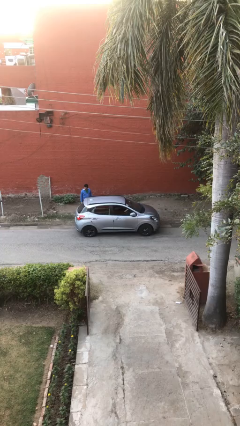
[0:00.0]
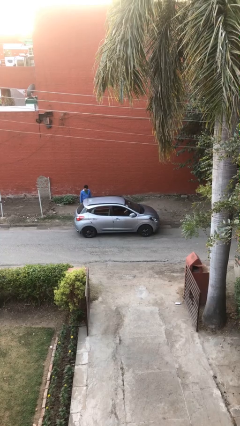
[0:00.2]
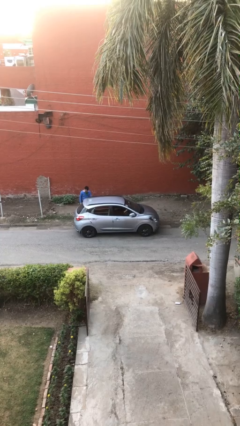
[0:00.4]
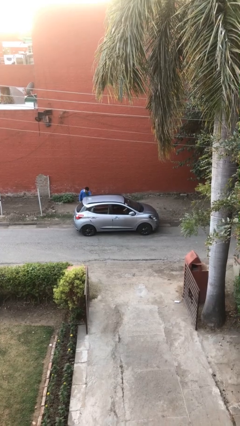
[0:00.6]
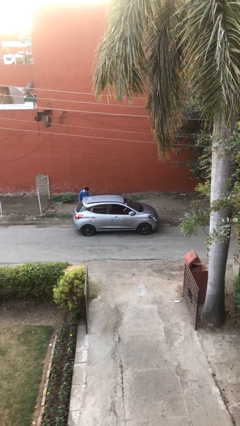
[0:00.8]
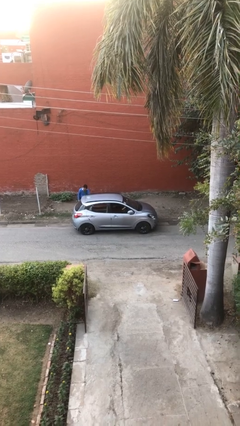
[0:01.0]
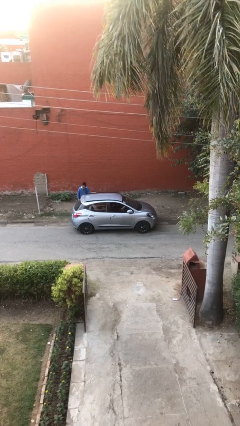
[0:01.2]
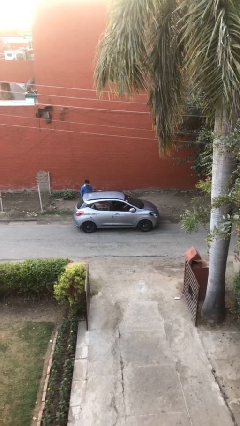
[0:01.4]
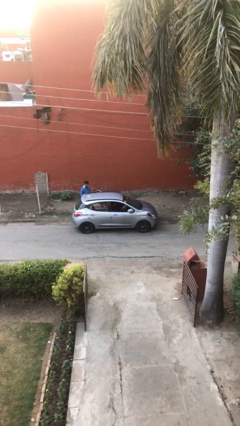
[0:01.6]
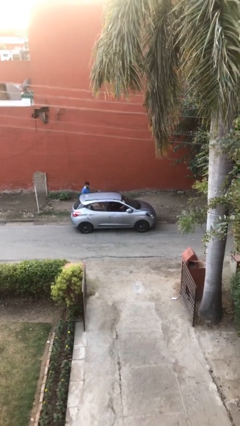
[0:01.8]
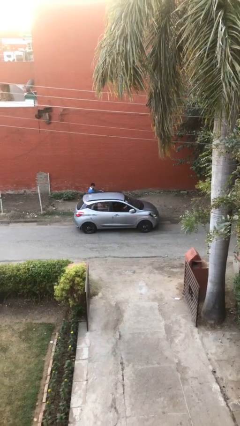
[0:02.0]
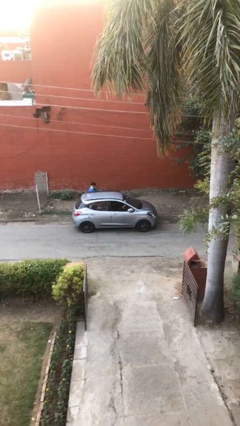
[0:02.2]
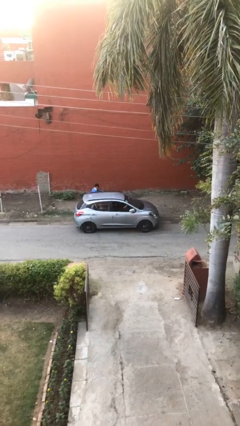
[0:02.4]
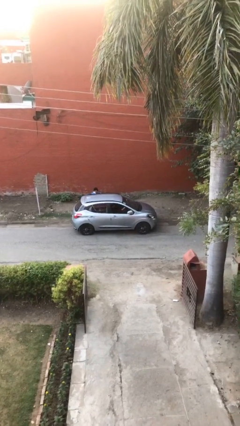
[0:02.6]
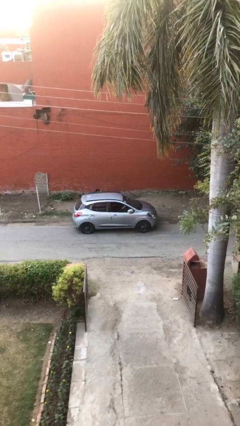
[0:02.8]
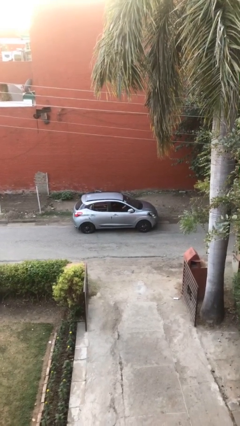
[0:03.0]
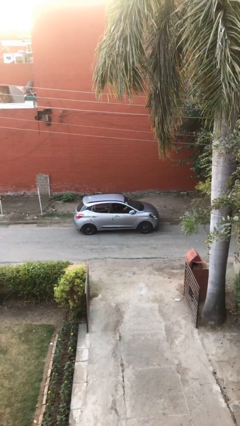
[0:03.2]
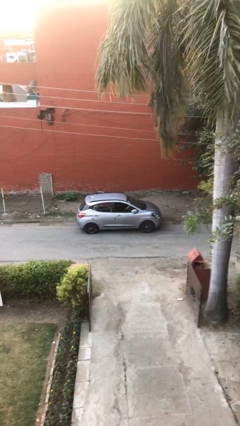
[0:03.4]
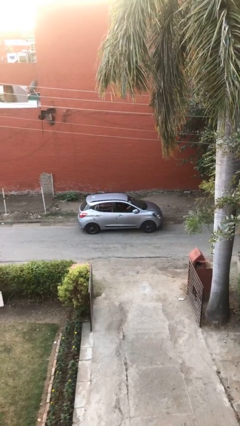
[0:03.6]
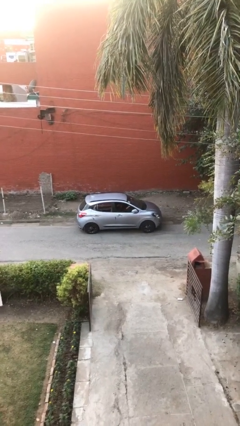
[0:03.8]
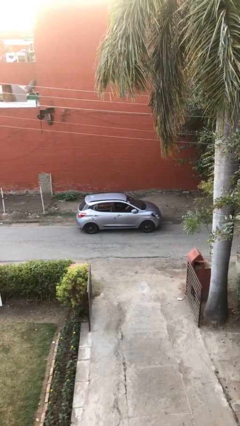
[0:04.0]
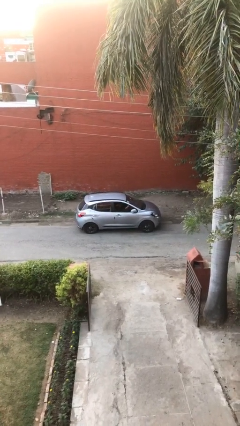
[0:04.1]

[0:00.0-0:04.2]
car picks up person

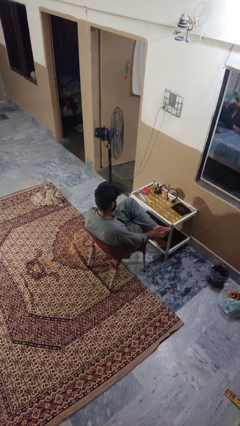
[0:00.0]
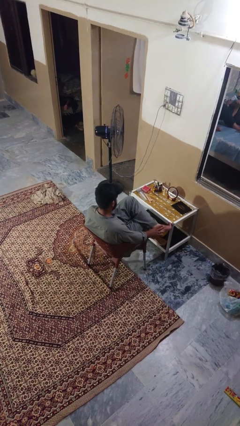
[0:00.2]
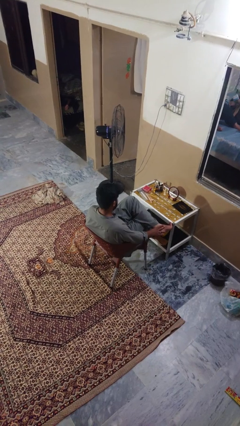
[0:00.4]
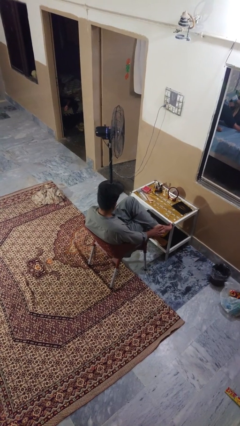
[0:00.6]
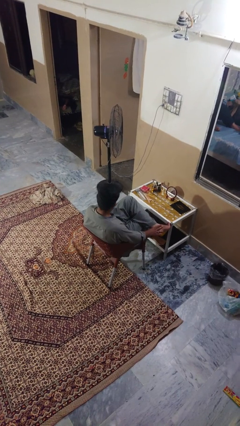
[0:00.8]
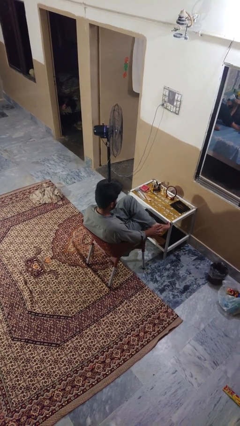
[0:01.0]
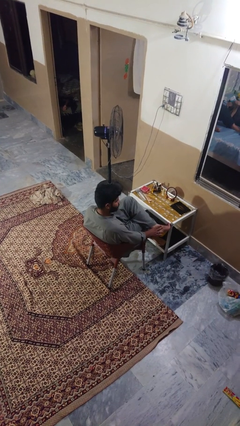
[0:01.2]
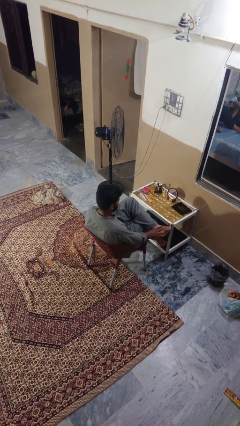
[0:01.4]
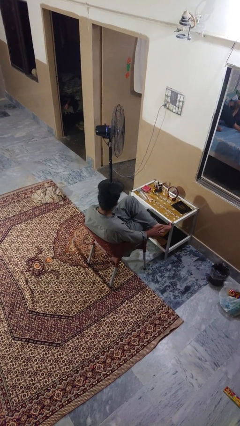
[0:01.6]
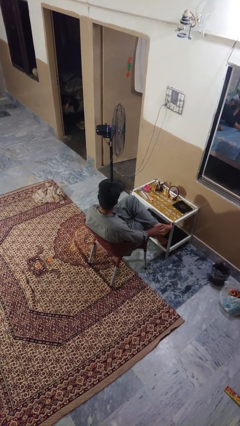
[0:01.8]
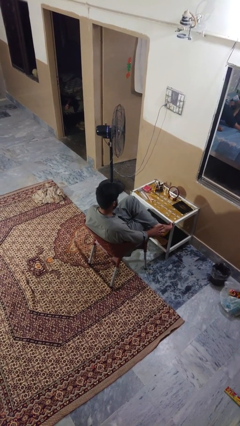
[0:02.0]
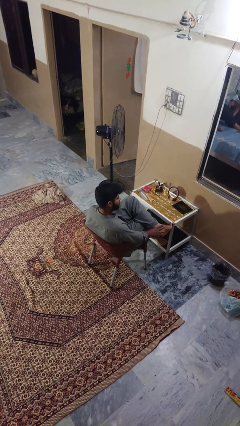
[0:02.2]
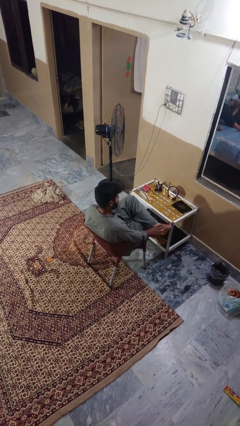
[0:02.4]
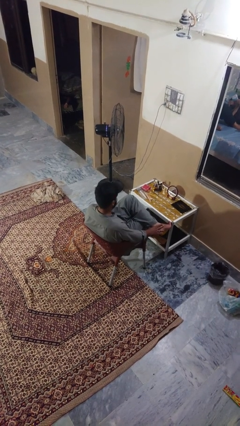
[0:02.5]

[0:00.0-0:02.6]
person shakes head

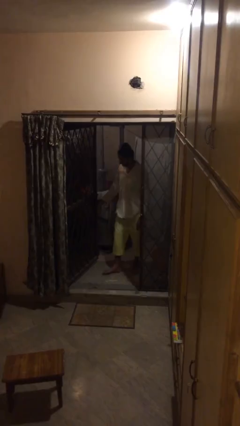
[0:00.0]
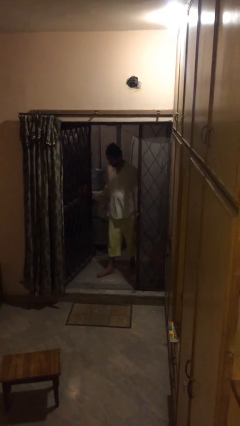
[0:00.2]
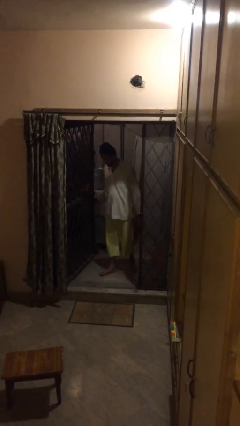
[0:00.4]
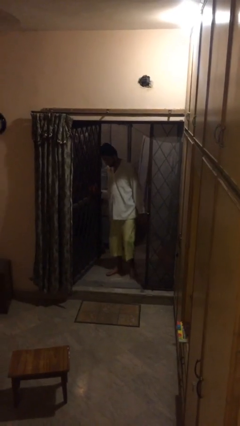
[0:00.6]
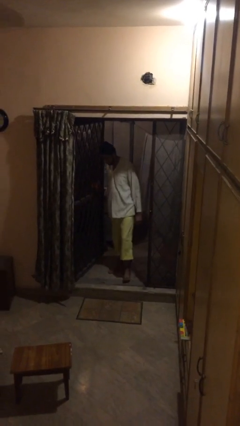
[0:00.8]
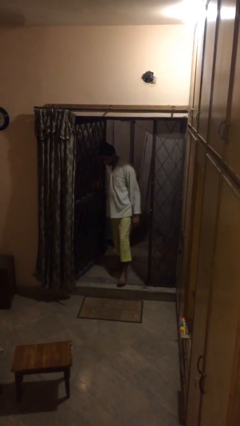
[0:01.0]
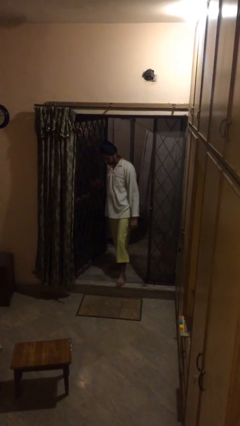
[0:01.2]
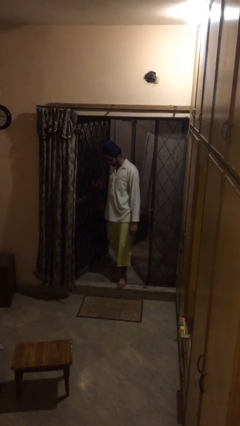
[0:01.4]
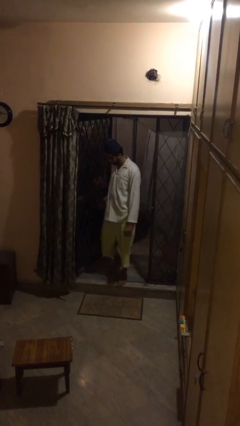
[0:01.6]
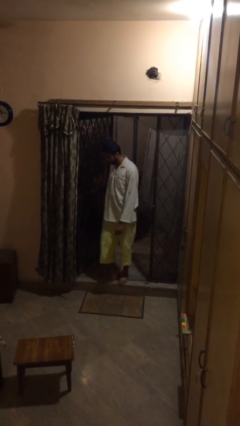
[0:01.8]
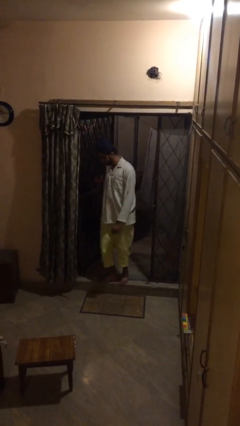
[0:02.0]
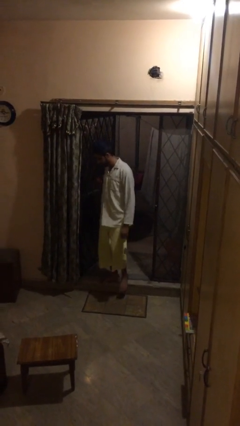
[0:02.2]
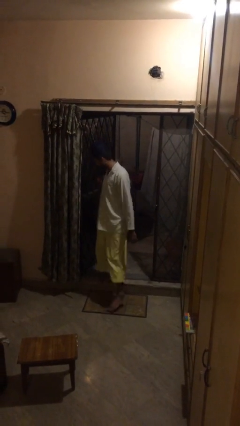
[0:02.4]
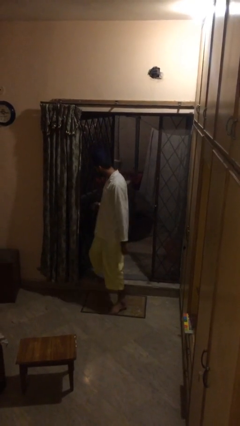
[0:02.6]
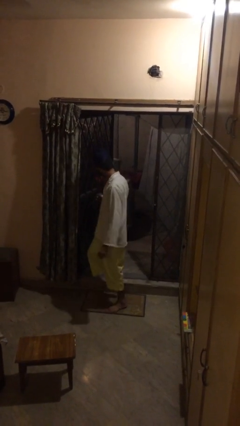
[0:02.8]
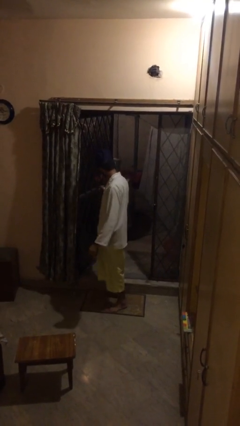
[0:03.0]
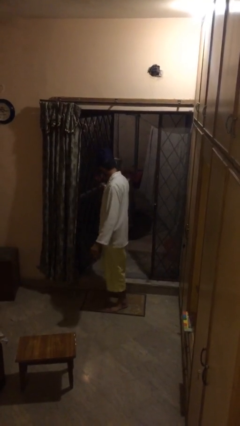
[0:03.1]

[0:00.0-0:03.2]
person enters scene through structure

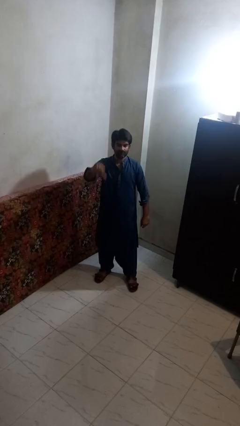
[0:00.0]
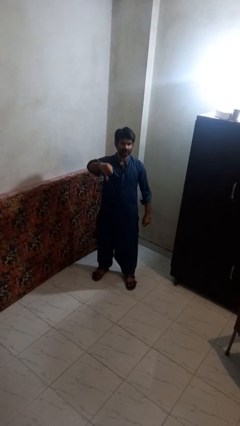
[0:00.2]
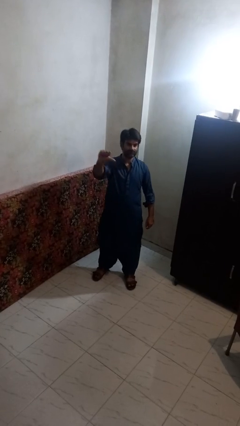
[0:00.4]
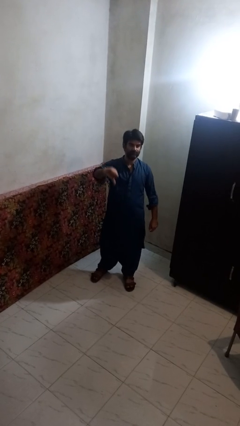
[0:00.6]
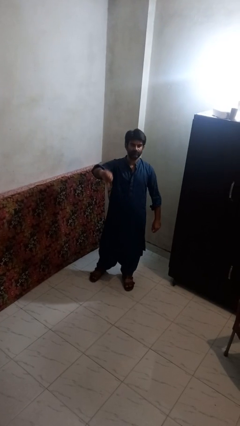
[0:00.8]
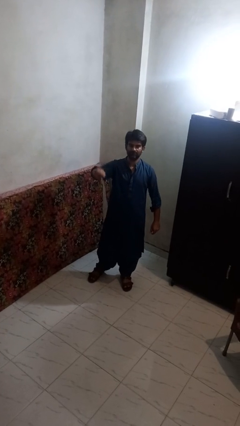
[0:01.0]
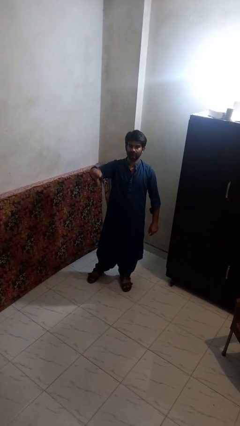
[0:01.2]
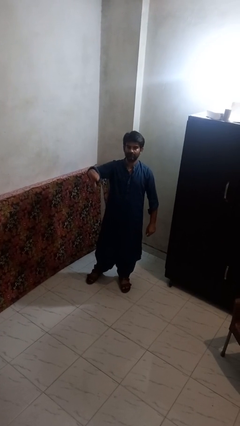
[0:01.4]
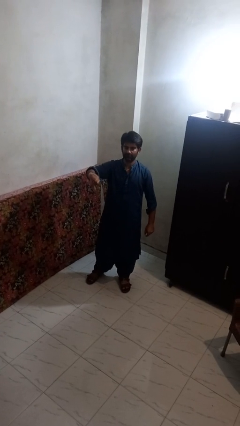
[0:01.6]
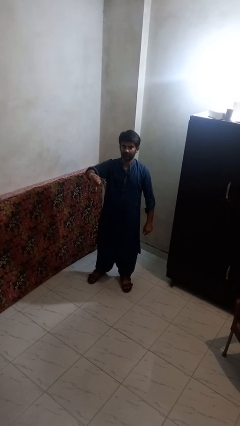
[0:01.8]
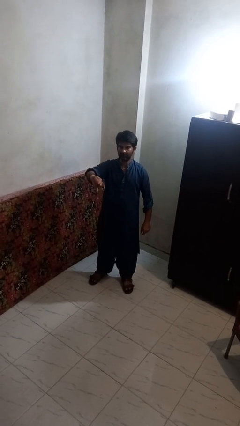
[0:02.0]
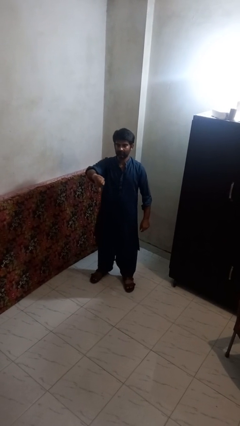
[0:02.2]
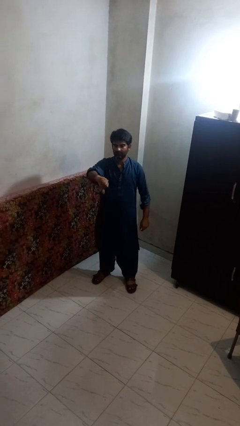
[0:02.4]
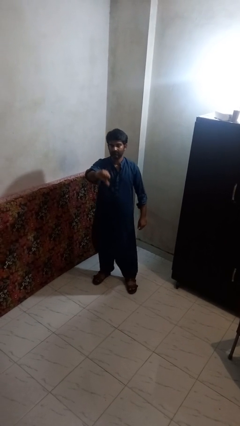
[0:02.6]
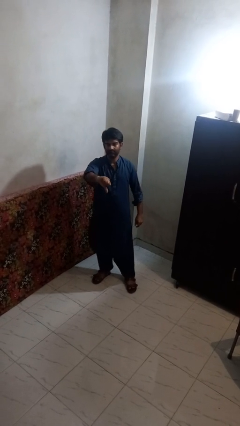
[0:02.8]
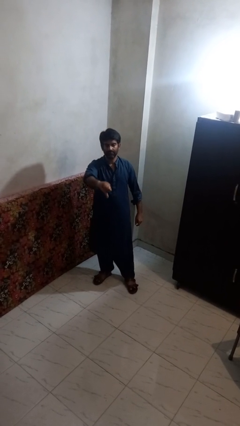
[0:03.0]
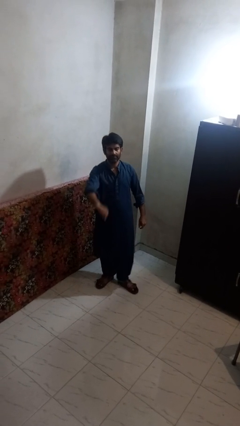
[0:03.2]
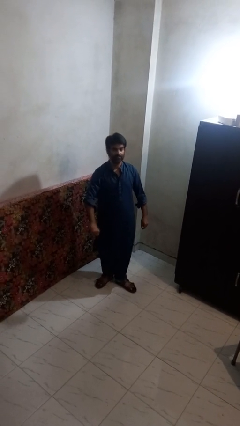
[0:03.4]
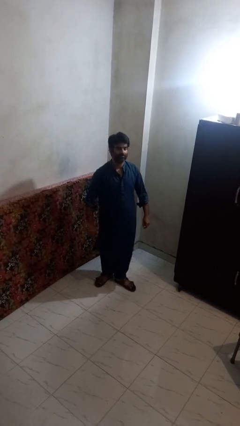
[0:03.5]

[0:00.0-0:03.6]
person gestures thumbs down

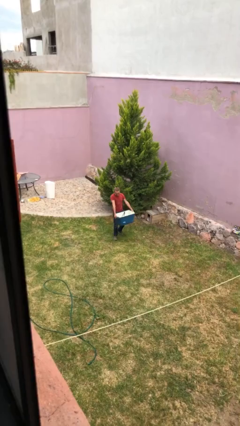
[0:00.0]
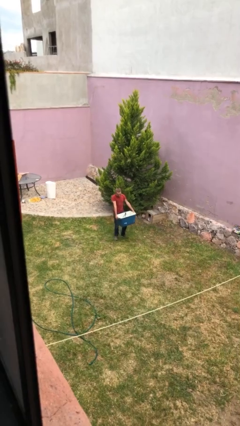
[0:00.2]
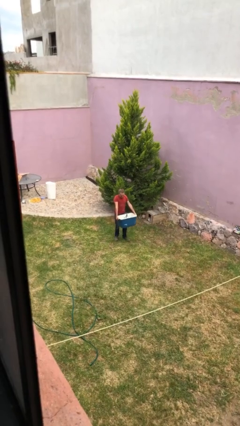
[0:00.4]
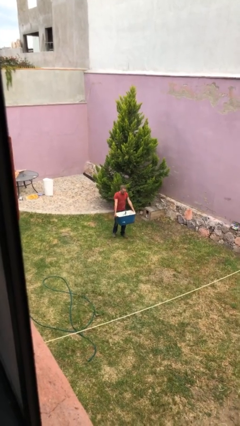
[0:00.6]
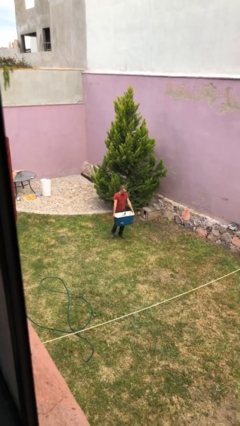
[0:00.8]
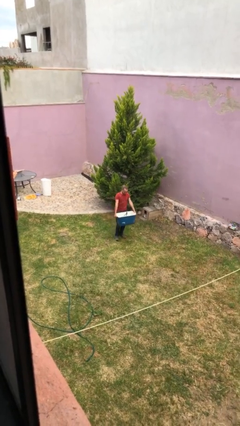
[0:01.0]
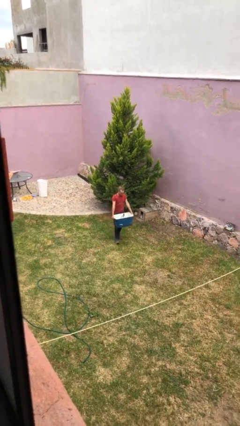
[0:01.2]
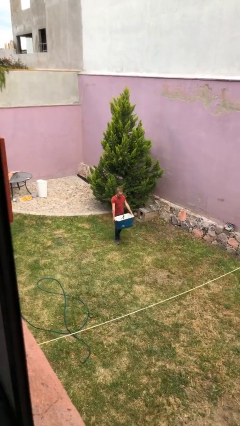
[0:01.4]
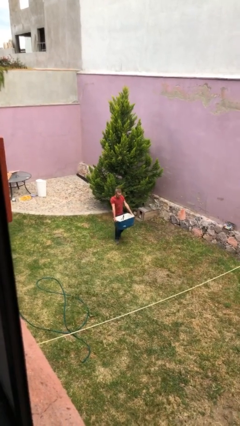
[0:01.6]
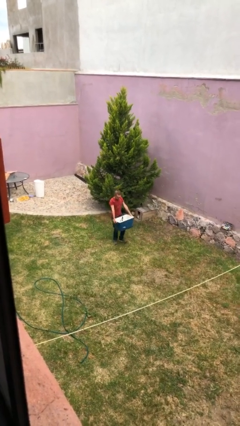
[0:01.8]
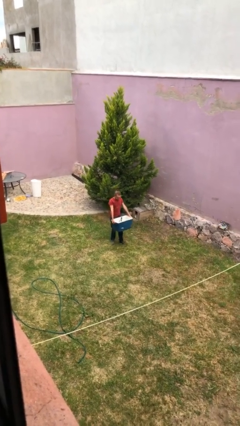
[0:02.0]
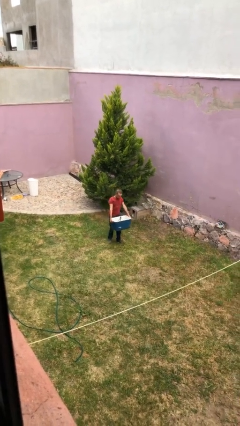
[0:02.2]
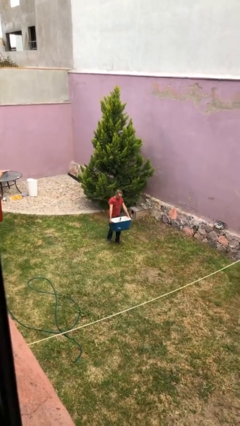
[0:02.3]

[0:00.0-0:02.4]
person carries heavy object

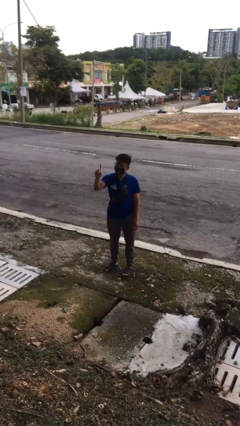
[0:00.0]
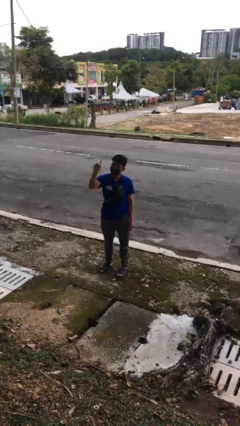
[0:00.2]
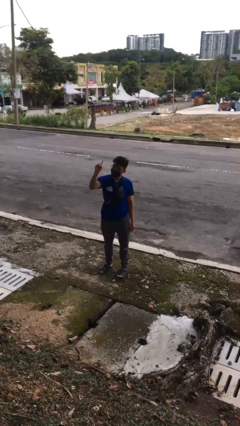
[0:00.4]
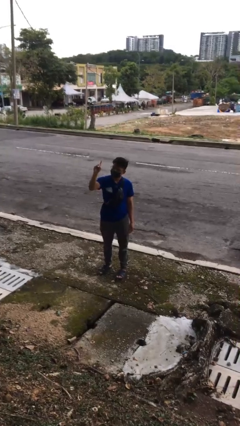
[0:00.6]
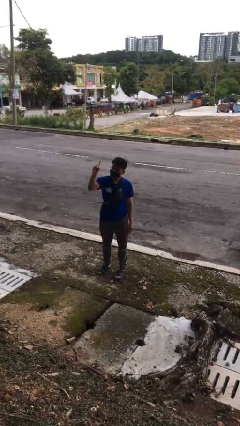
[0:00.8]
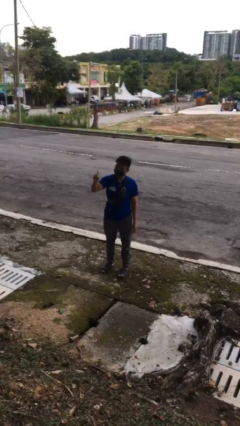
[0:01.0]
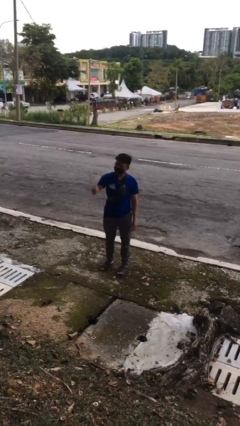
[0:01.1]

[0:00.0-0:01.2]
person gestures number one
